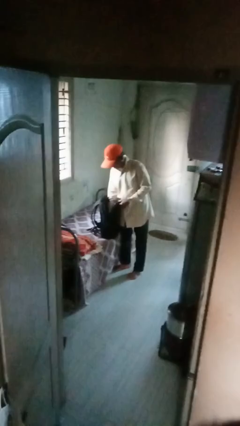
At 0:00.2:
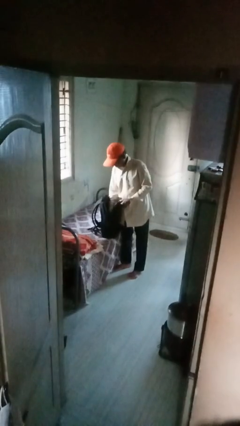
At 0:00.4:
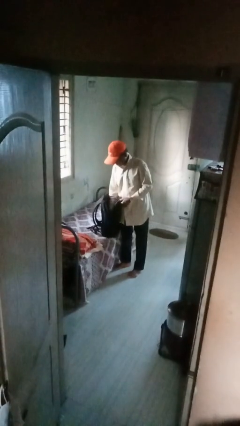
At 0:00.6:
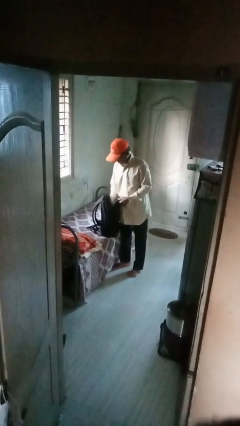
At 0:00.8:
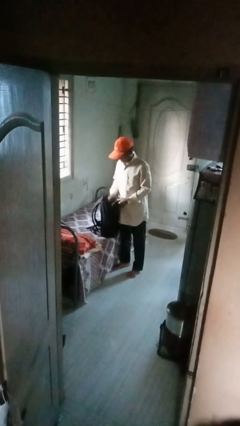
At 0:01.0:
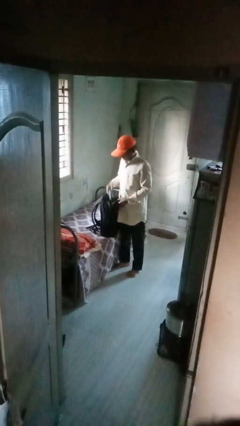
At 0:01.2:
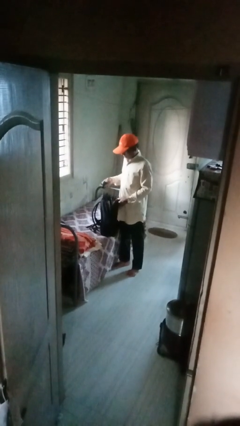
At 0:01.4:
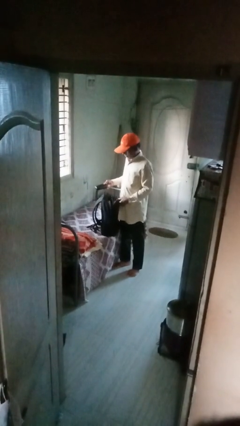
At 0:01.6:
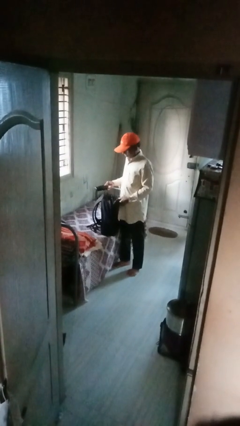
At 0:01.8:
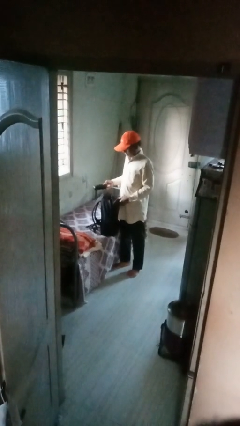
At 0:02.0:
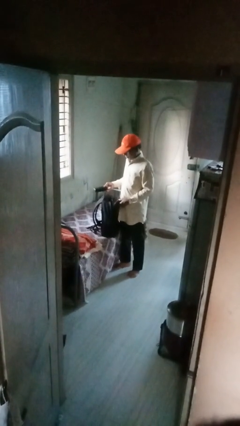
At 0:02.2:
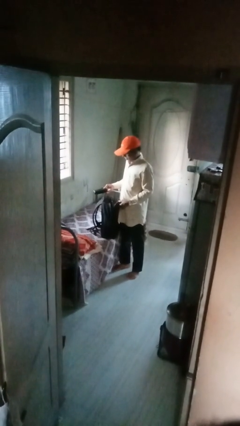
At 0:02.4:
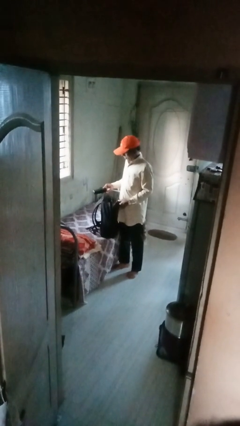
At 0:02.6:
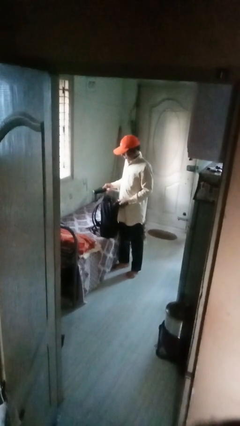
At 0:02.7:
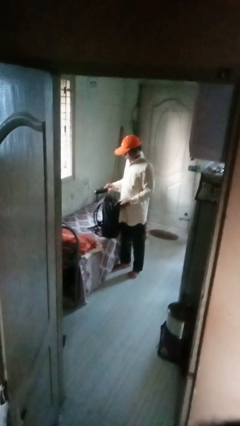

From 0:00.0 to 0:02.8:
person takes object from backpack

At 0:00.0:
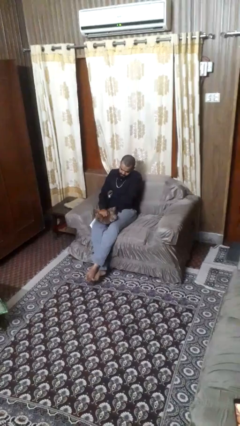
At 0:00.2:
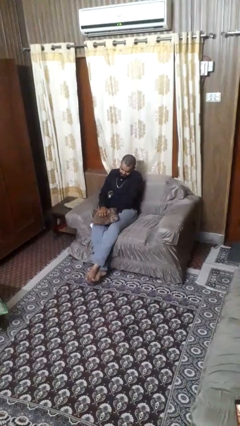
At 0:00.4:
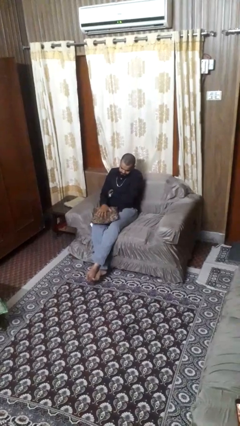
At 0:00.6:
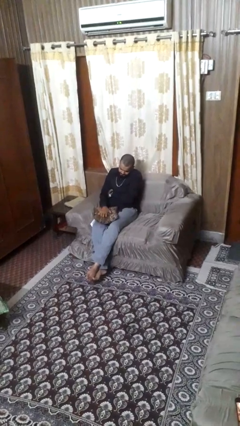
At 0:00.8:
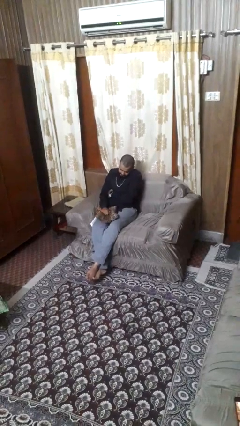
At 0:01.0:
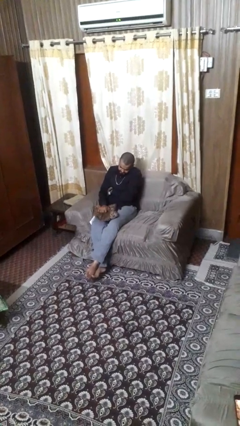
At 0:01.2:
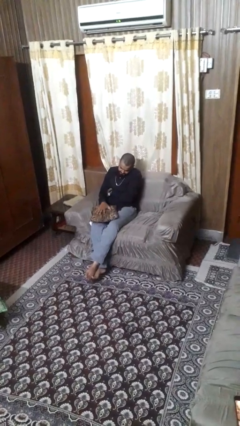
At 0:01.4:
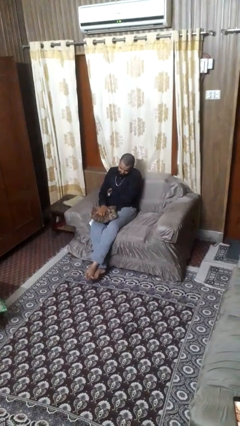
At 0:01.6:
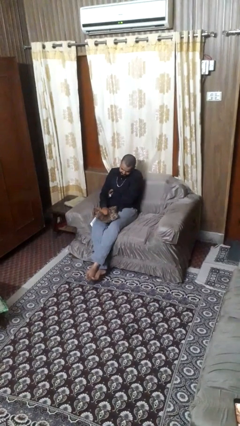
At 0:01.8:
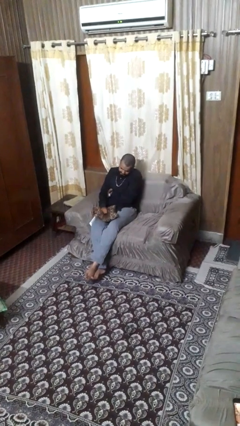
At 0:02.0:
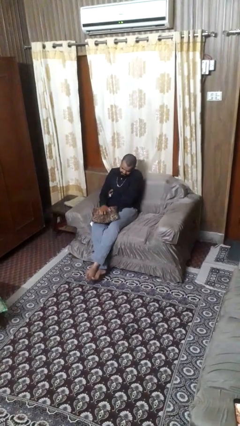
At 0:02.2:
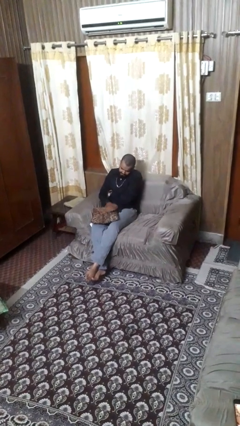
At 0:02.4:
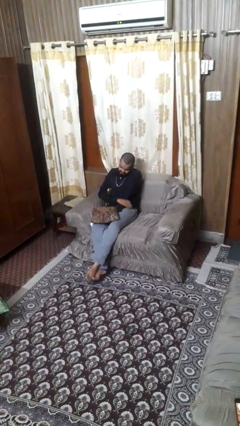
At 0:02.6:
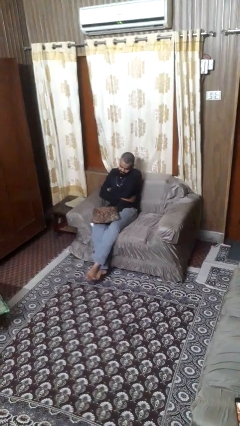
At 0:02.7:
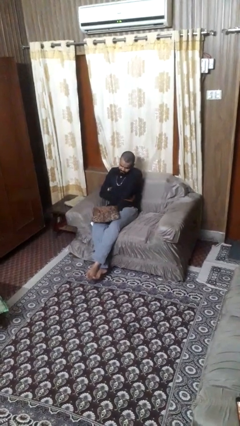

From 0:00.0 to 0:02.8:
person squeezes object

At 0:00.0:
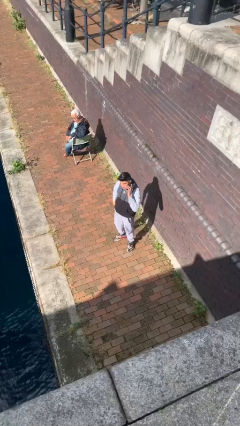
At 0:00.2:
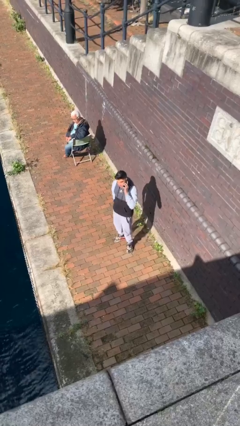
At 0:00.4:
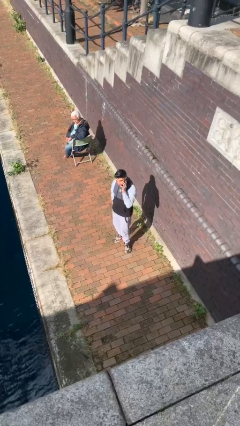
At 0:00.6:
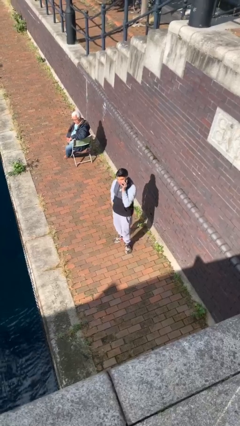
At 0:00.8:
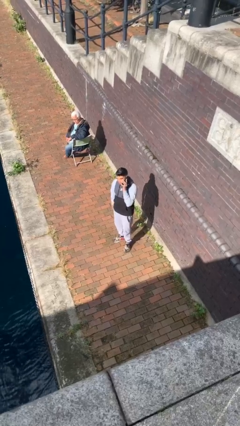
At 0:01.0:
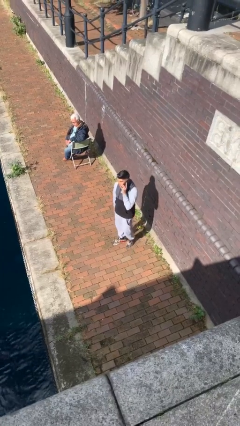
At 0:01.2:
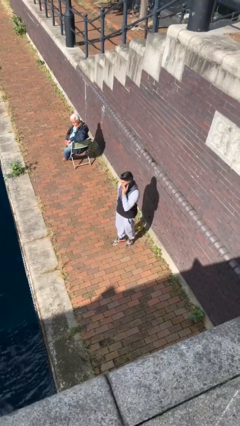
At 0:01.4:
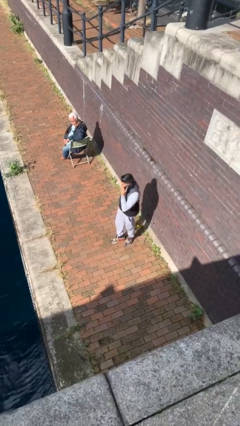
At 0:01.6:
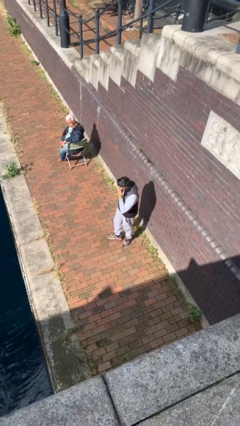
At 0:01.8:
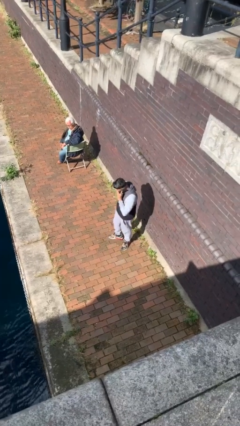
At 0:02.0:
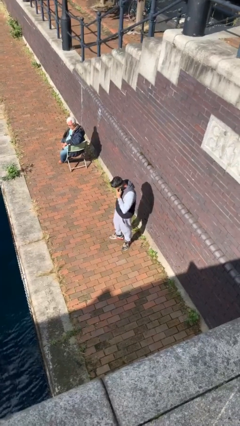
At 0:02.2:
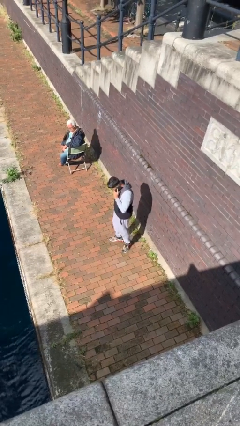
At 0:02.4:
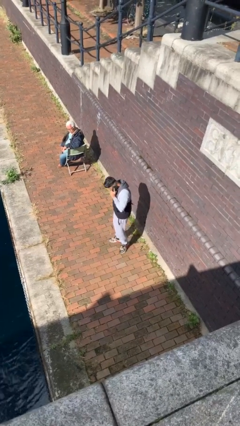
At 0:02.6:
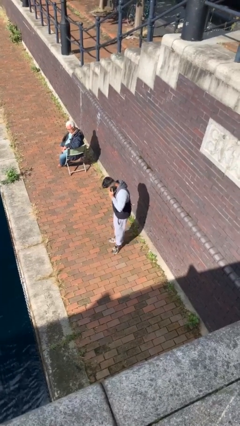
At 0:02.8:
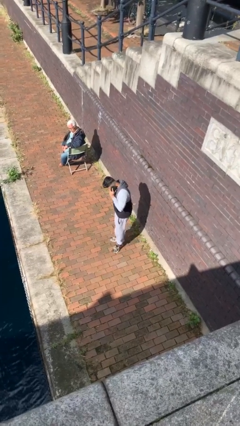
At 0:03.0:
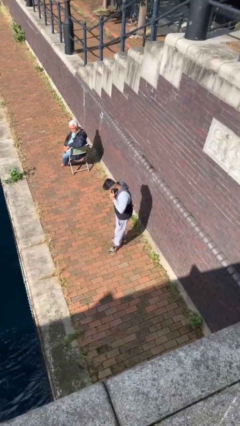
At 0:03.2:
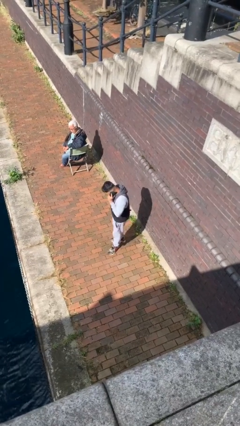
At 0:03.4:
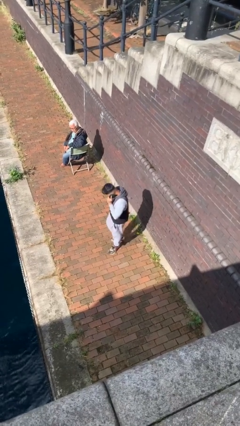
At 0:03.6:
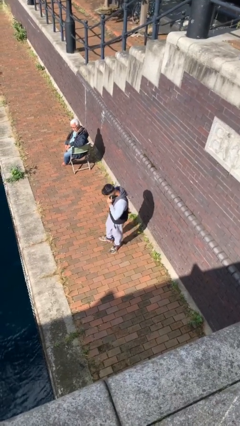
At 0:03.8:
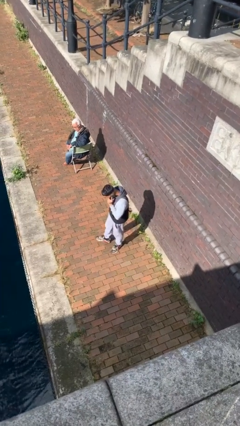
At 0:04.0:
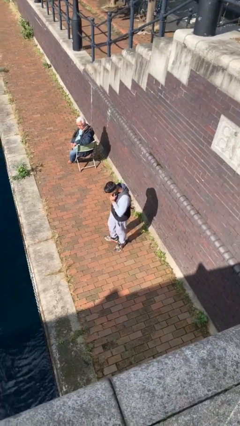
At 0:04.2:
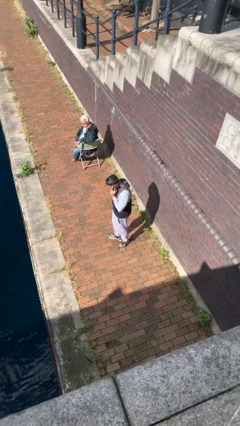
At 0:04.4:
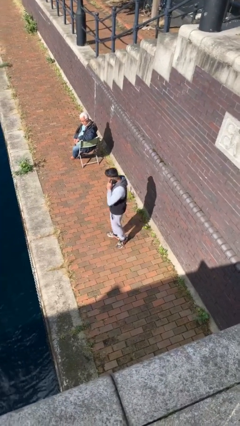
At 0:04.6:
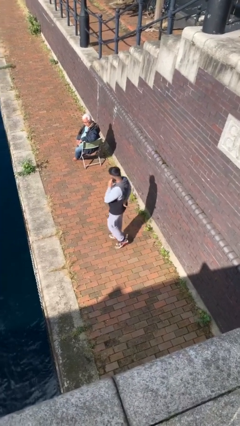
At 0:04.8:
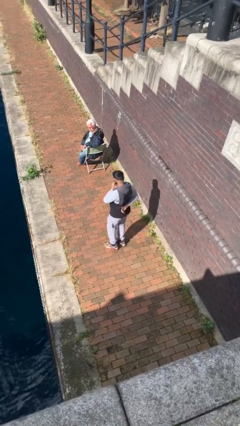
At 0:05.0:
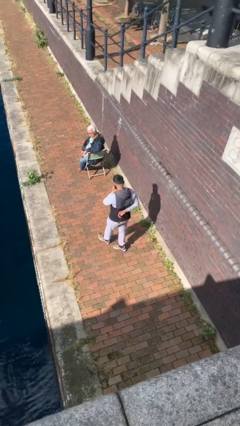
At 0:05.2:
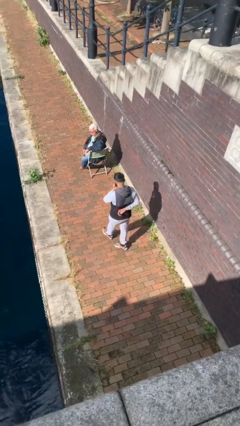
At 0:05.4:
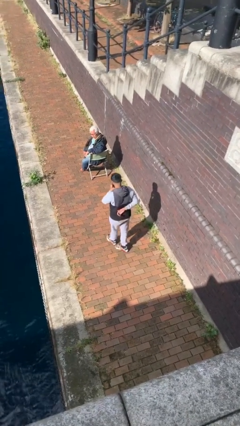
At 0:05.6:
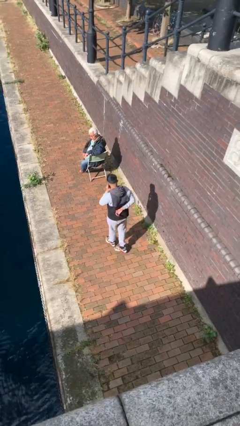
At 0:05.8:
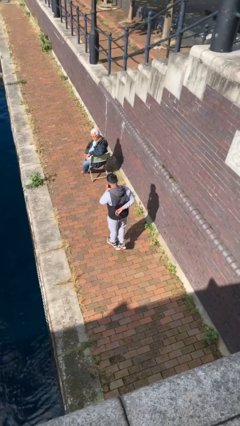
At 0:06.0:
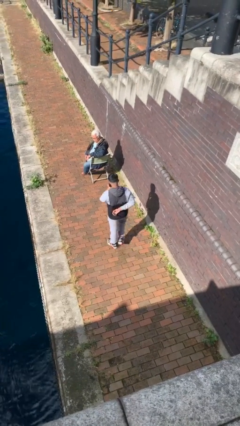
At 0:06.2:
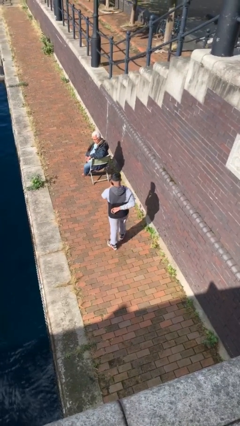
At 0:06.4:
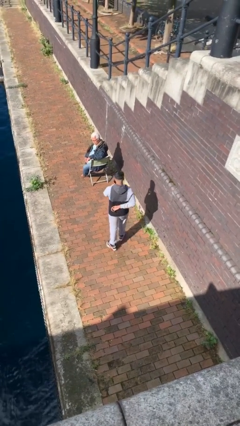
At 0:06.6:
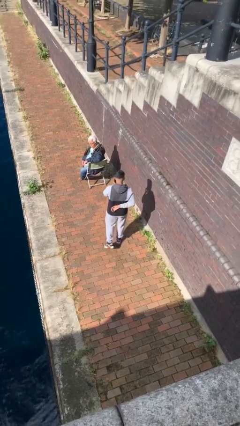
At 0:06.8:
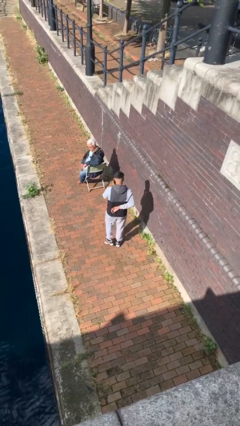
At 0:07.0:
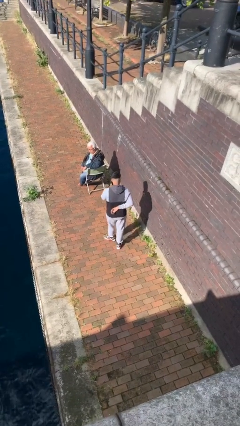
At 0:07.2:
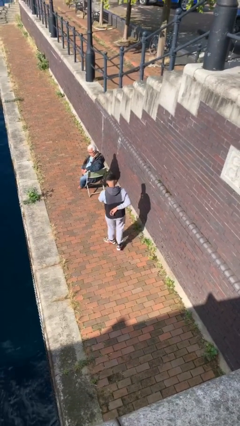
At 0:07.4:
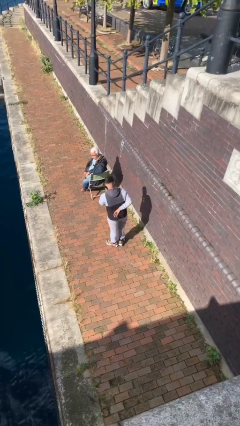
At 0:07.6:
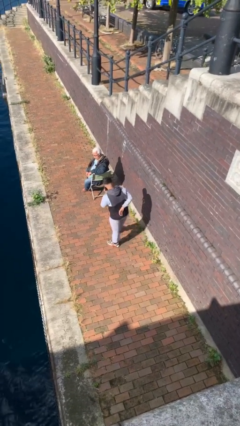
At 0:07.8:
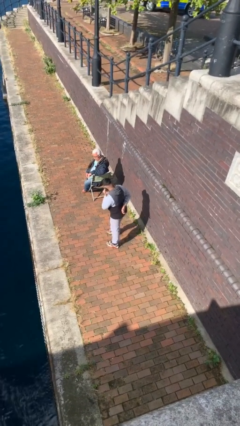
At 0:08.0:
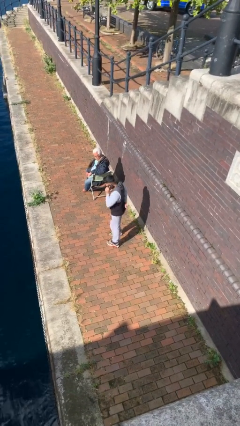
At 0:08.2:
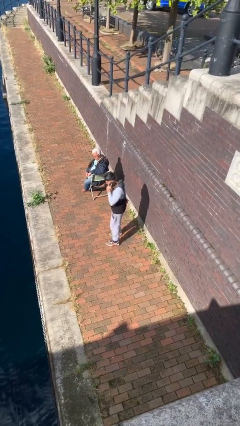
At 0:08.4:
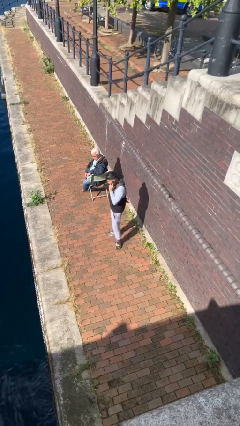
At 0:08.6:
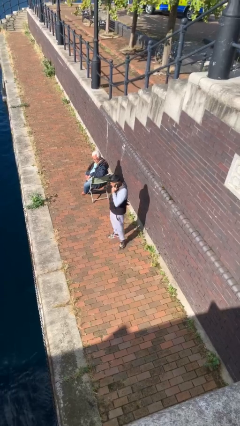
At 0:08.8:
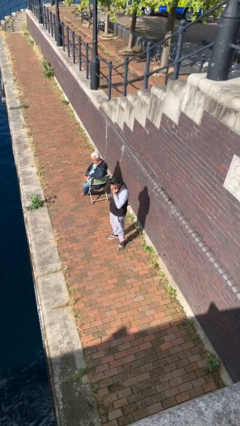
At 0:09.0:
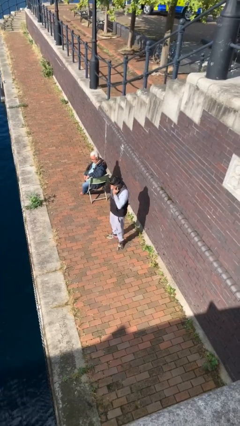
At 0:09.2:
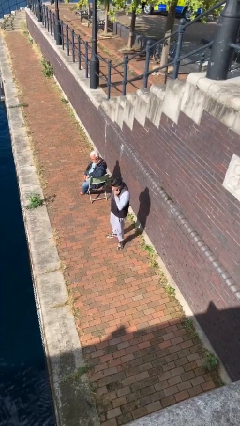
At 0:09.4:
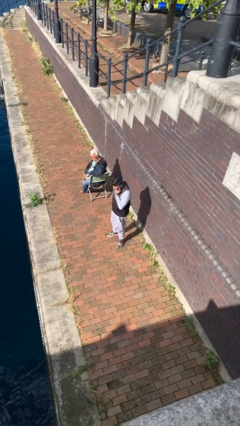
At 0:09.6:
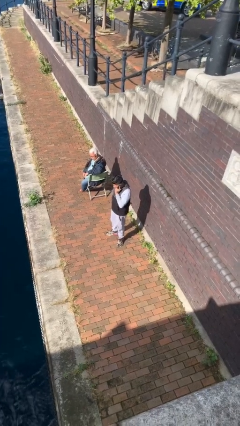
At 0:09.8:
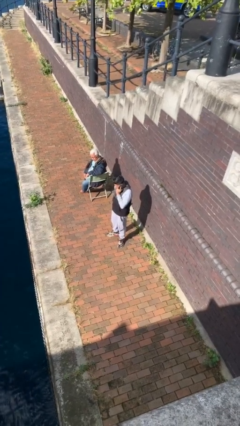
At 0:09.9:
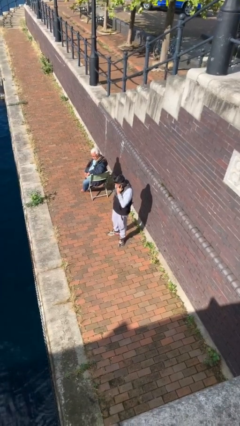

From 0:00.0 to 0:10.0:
person talks on phone

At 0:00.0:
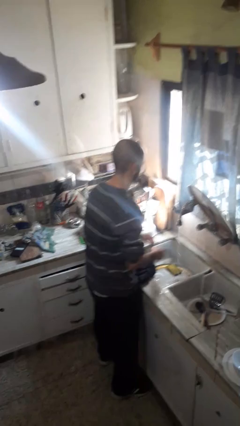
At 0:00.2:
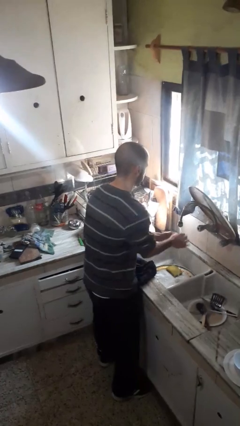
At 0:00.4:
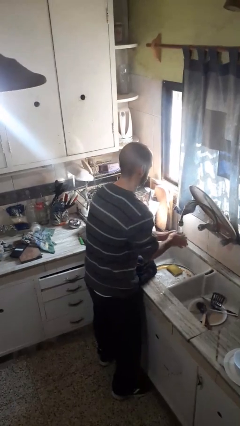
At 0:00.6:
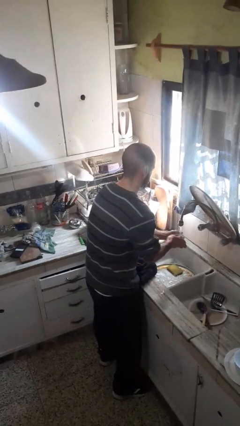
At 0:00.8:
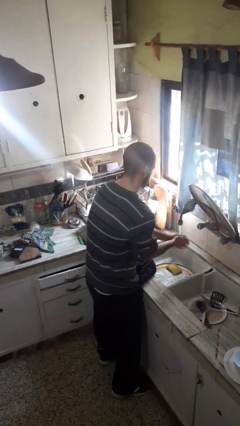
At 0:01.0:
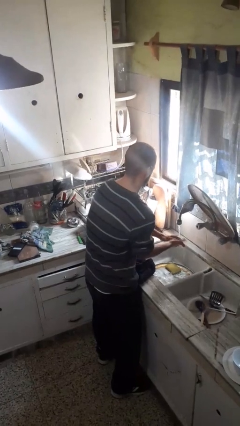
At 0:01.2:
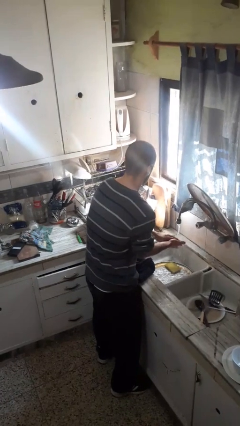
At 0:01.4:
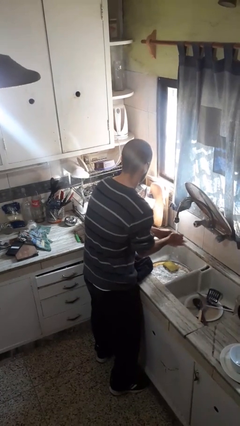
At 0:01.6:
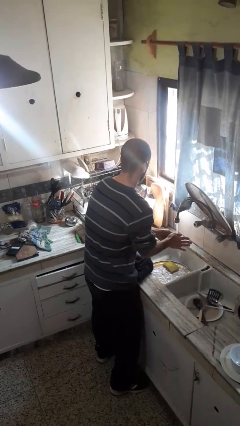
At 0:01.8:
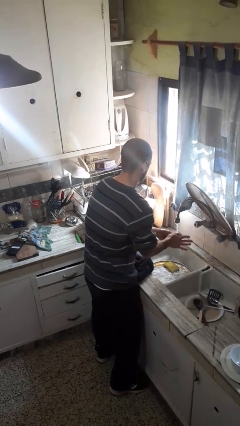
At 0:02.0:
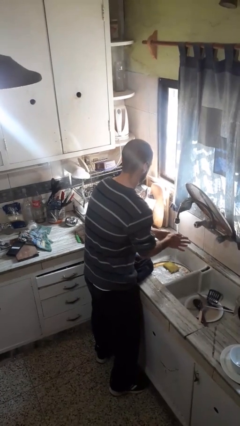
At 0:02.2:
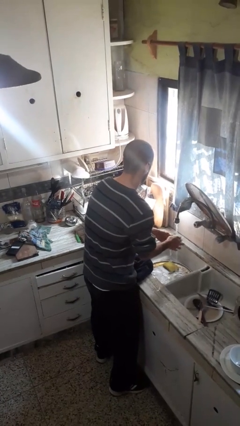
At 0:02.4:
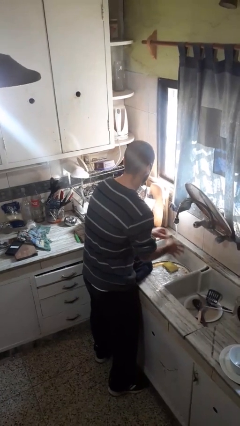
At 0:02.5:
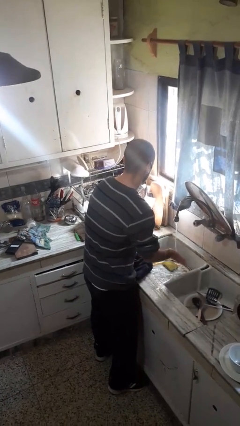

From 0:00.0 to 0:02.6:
person washes hands
